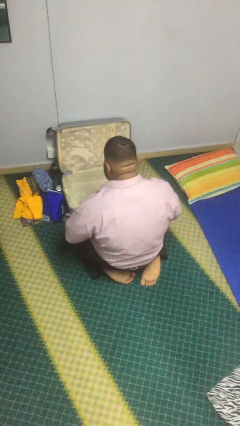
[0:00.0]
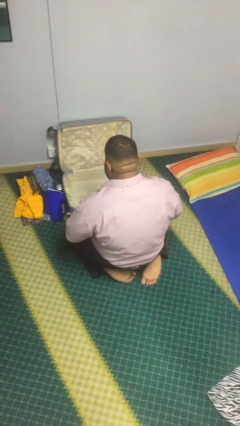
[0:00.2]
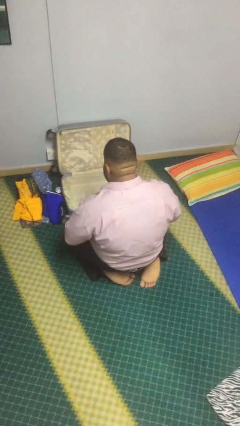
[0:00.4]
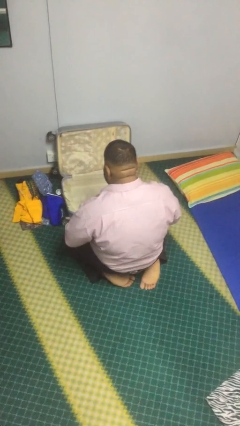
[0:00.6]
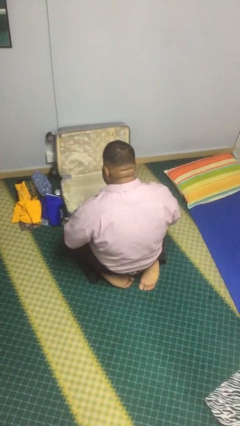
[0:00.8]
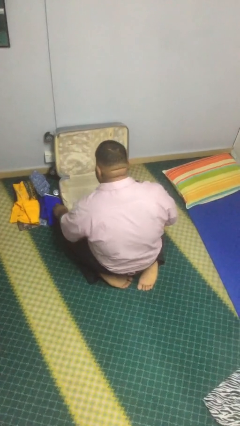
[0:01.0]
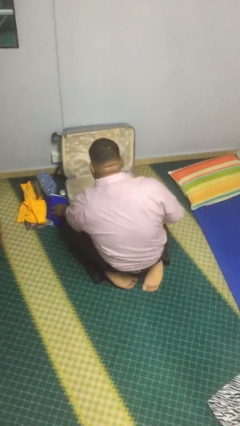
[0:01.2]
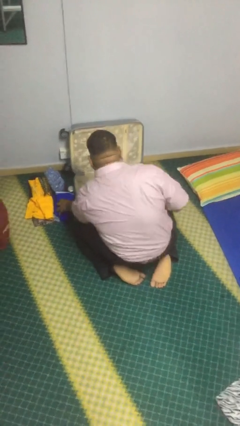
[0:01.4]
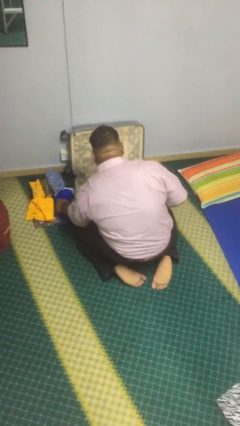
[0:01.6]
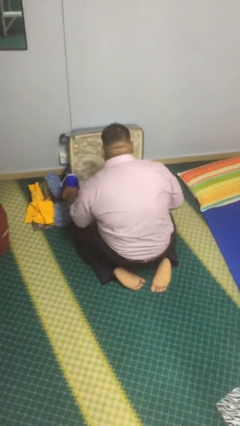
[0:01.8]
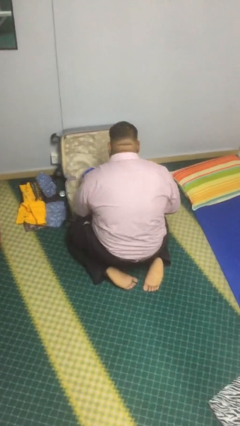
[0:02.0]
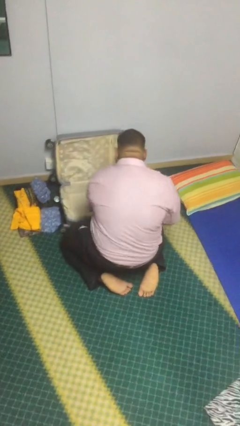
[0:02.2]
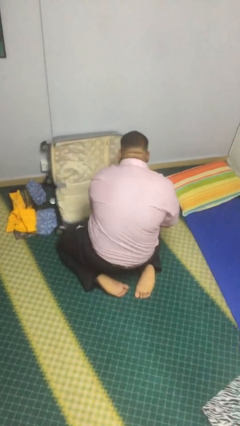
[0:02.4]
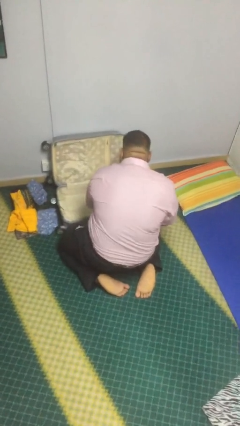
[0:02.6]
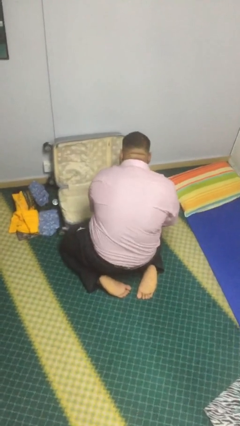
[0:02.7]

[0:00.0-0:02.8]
person loads clothes into suitcase

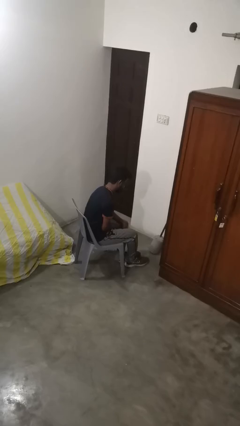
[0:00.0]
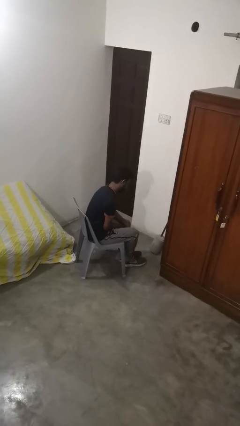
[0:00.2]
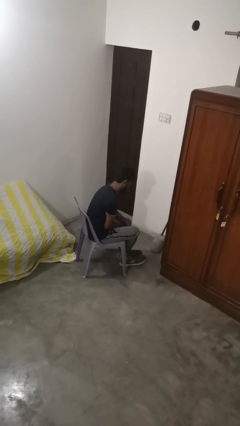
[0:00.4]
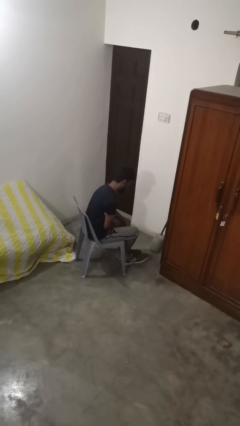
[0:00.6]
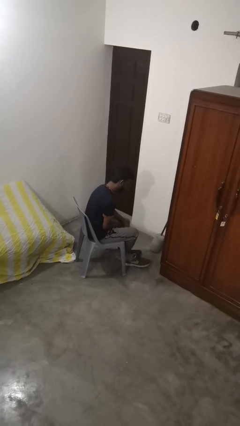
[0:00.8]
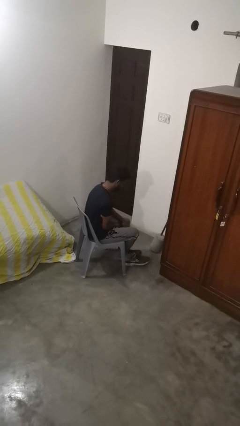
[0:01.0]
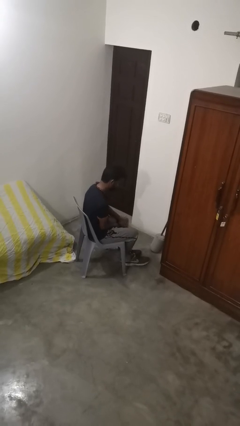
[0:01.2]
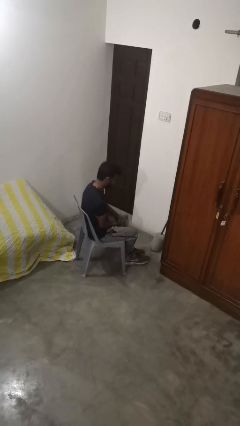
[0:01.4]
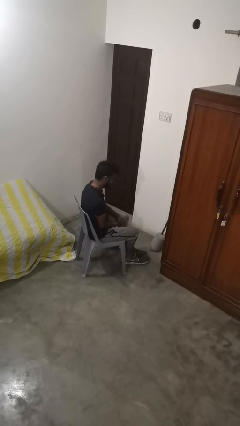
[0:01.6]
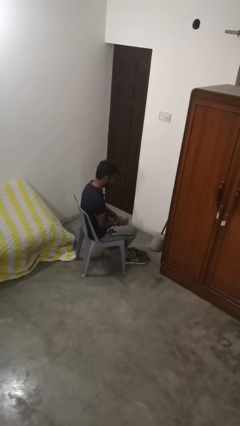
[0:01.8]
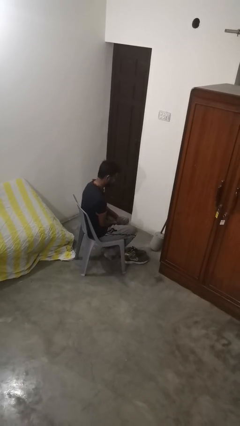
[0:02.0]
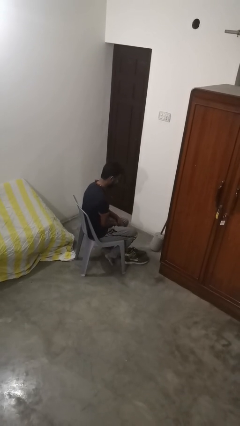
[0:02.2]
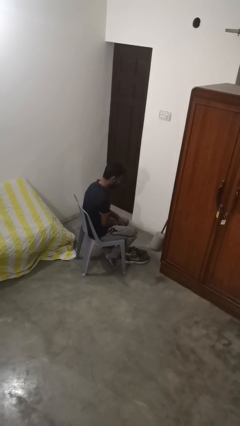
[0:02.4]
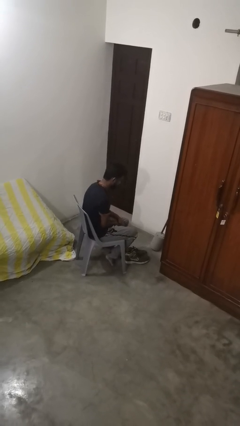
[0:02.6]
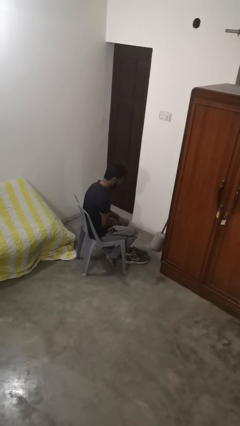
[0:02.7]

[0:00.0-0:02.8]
person takes off shoes

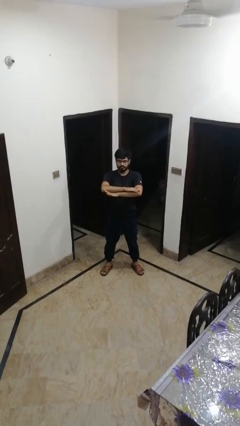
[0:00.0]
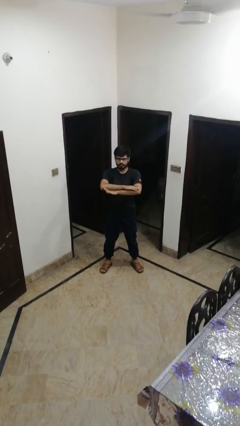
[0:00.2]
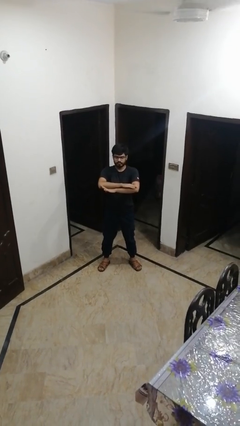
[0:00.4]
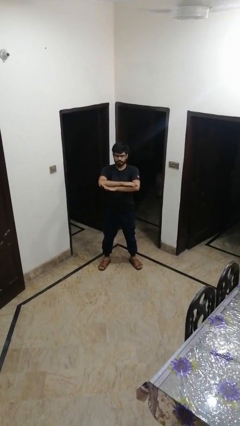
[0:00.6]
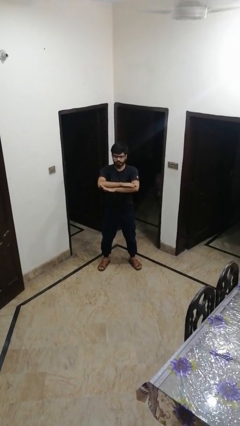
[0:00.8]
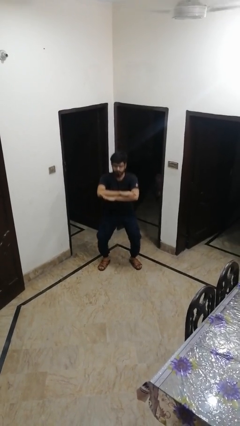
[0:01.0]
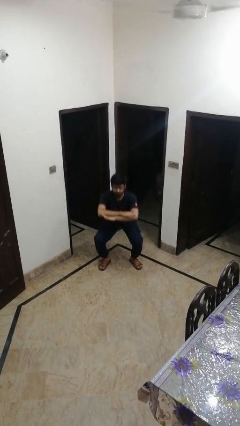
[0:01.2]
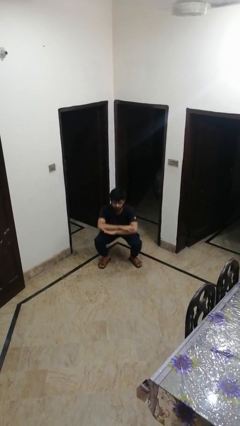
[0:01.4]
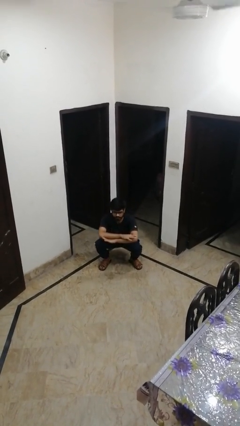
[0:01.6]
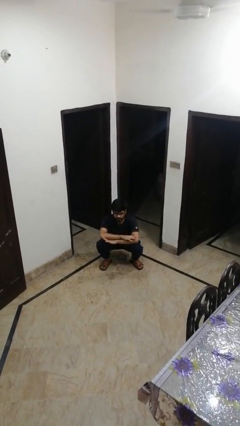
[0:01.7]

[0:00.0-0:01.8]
person squats

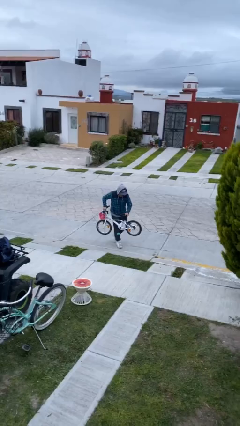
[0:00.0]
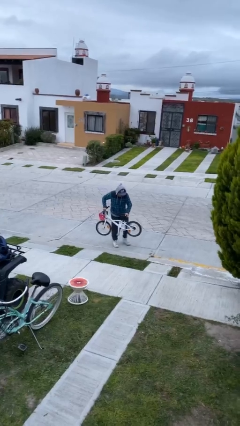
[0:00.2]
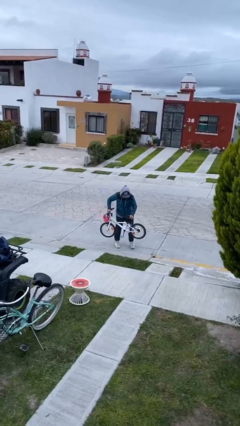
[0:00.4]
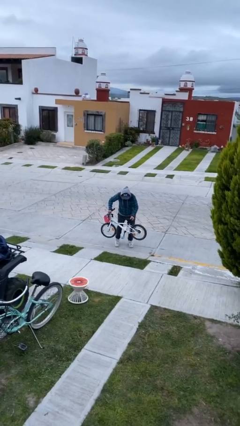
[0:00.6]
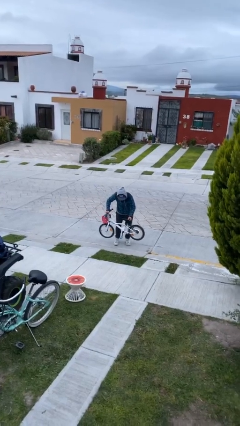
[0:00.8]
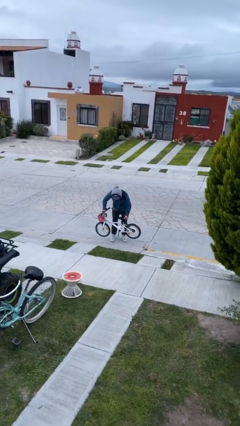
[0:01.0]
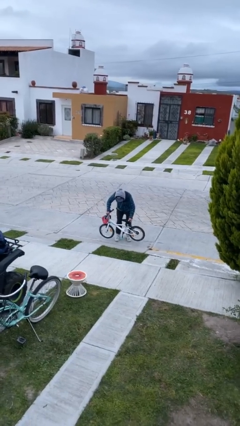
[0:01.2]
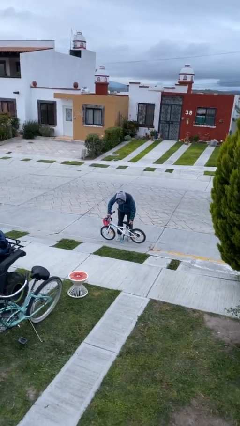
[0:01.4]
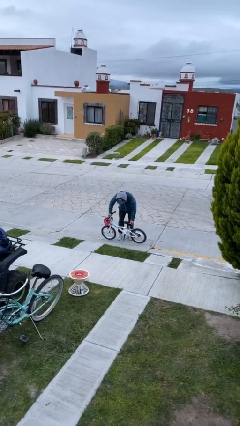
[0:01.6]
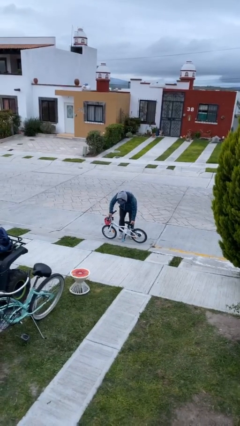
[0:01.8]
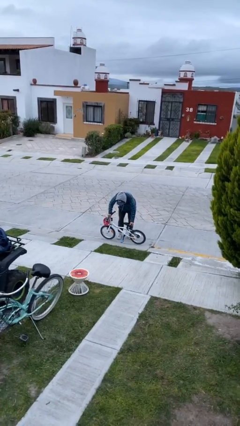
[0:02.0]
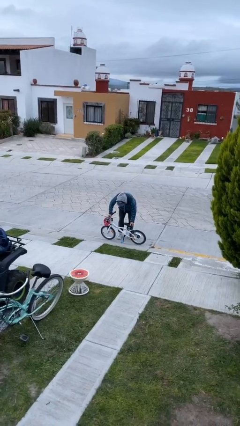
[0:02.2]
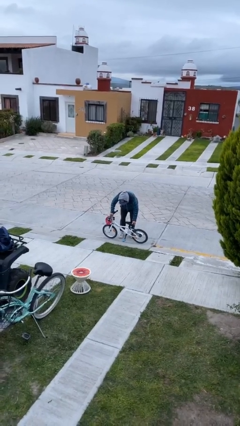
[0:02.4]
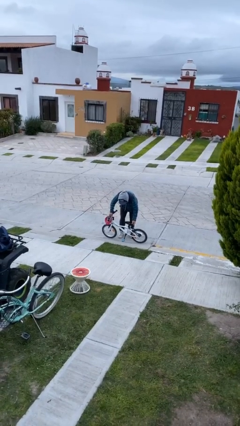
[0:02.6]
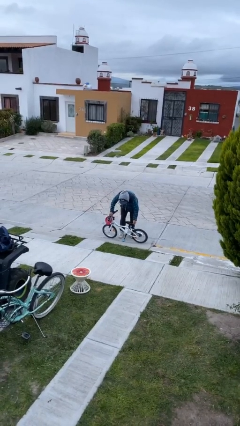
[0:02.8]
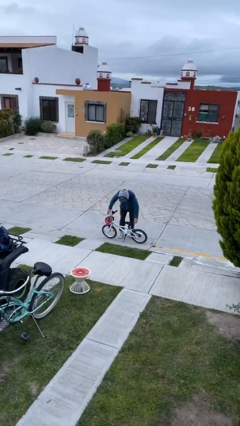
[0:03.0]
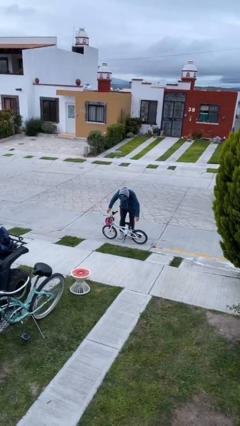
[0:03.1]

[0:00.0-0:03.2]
person puts down object on floor

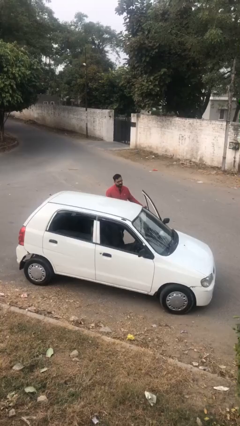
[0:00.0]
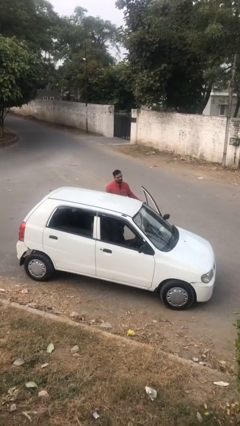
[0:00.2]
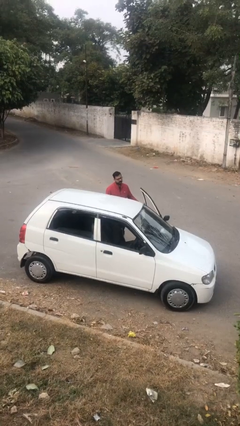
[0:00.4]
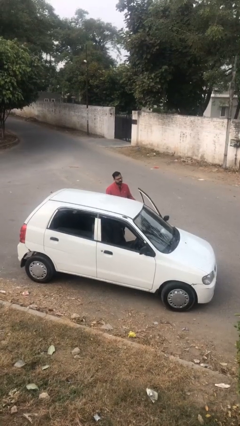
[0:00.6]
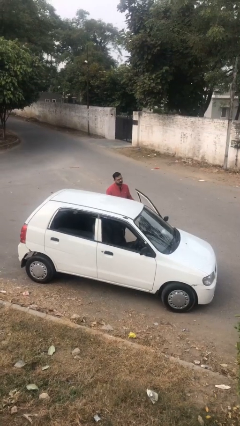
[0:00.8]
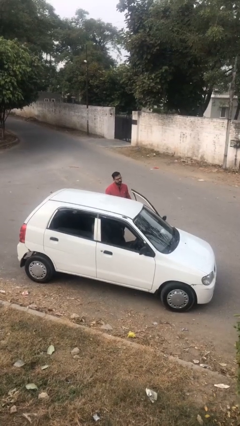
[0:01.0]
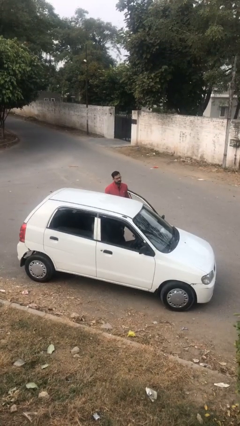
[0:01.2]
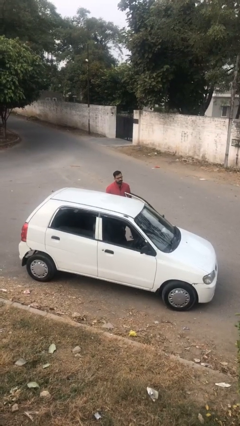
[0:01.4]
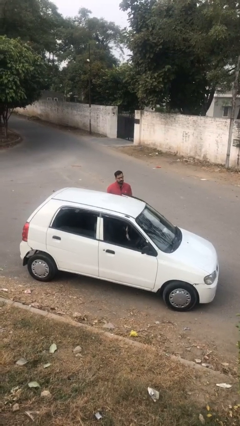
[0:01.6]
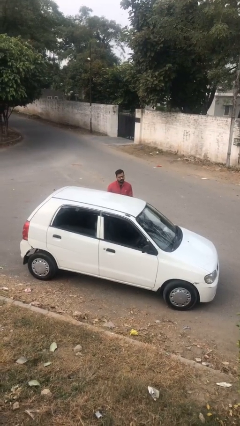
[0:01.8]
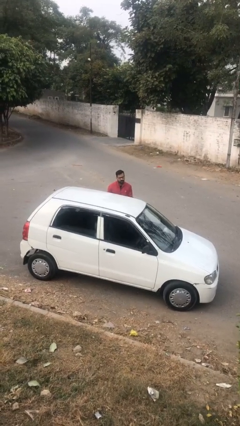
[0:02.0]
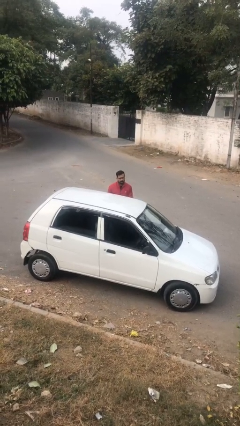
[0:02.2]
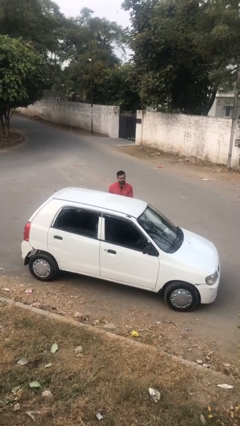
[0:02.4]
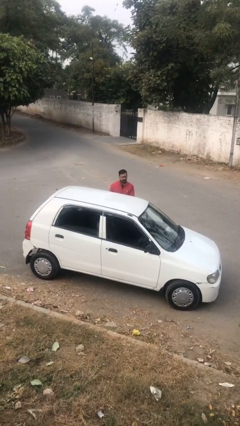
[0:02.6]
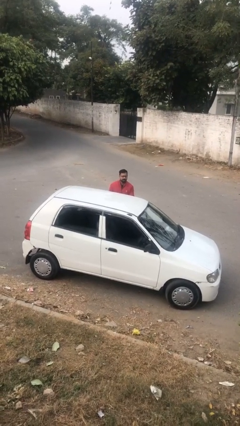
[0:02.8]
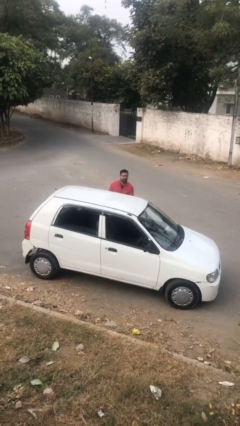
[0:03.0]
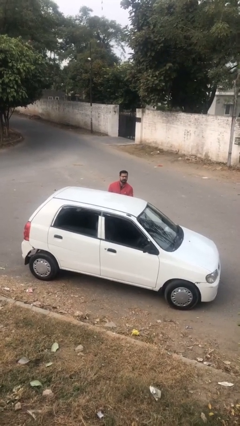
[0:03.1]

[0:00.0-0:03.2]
person closes car door

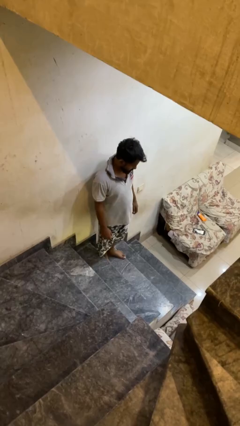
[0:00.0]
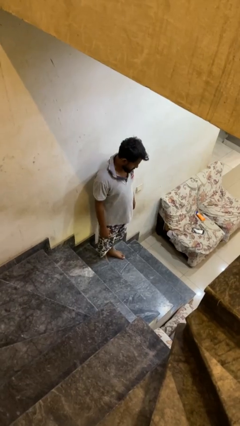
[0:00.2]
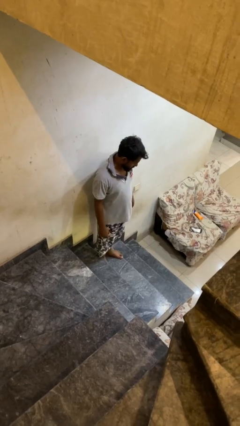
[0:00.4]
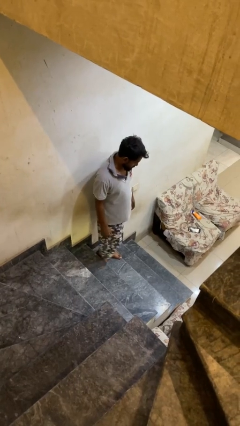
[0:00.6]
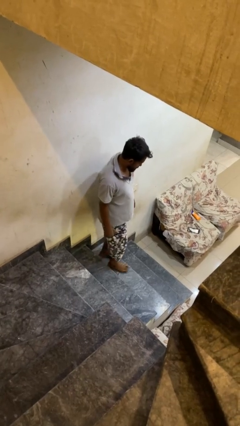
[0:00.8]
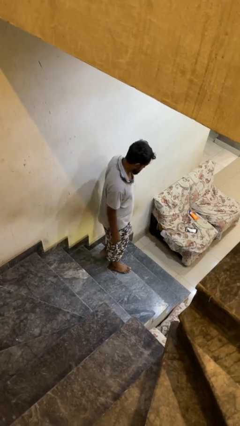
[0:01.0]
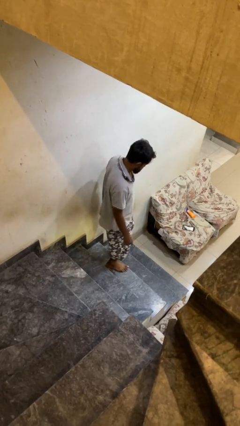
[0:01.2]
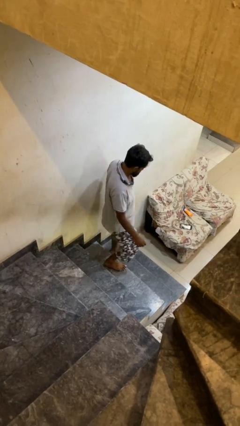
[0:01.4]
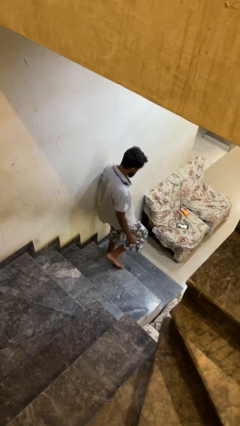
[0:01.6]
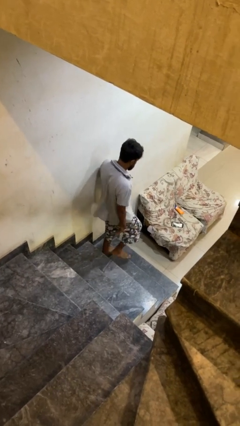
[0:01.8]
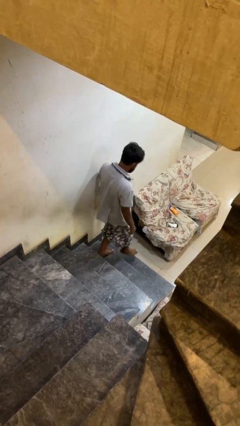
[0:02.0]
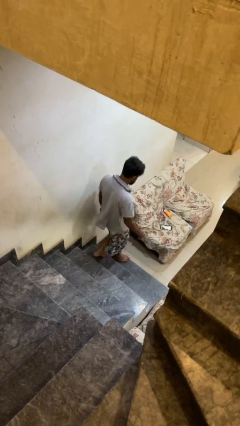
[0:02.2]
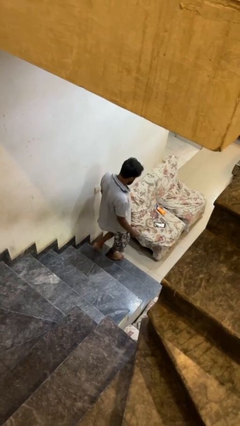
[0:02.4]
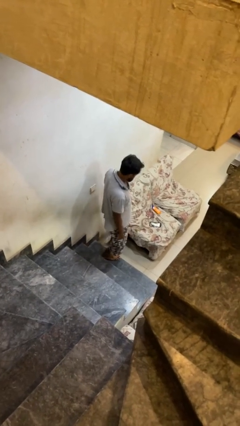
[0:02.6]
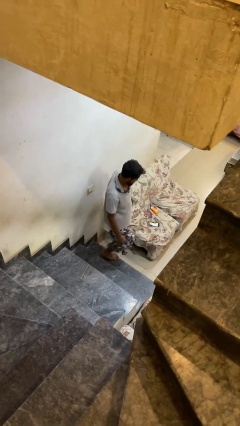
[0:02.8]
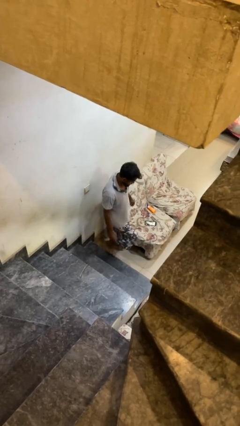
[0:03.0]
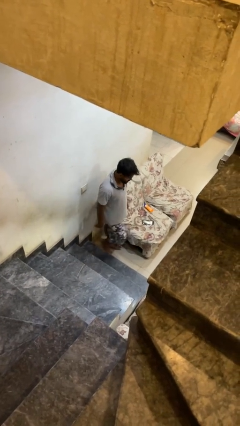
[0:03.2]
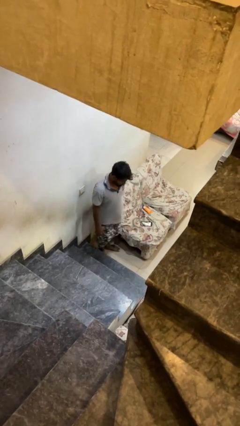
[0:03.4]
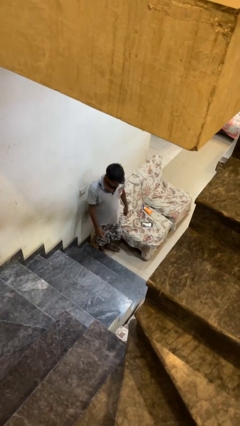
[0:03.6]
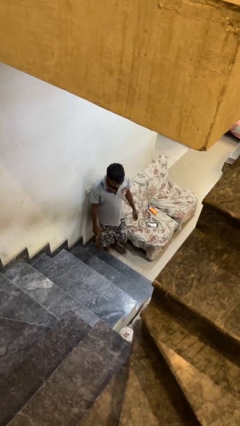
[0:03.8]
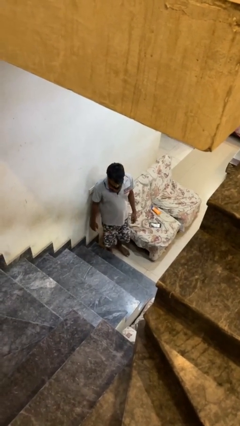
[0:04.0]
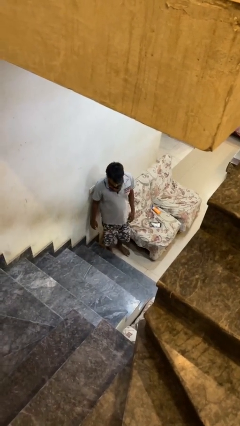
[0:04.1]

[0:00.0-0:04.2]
person climbs down stairs
